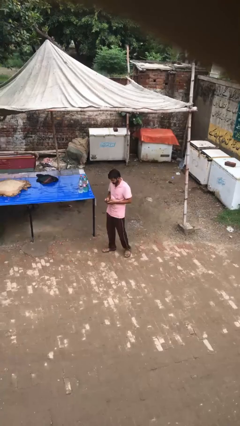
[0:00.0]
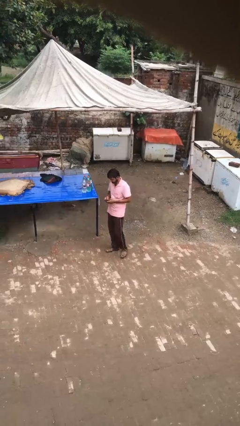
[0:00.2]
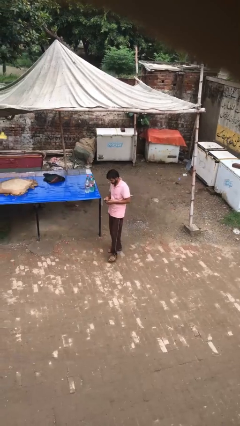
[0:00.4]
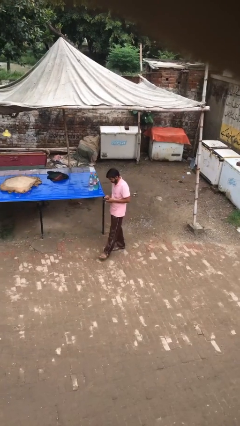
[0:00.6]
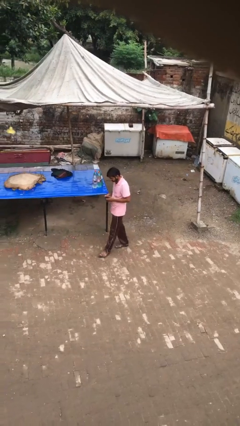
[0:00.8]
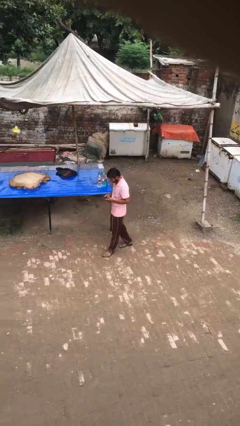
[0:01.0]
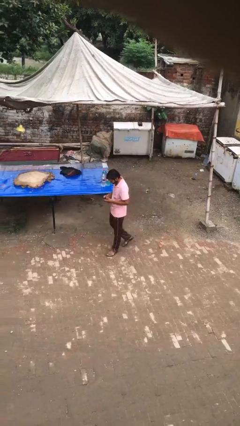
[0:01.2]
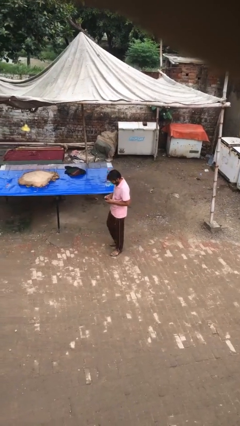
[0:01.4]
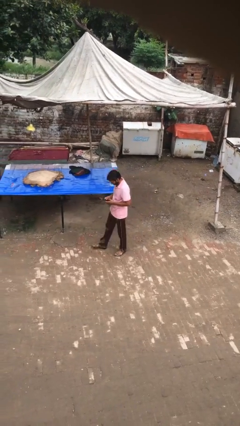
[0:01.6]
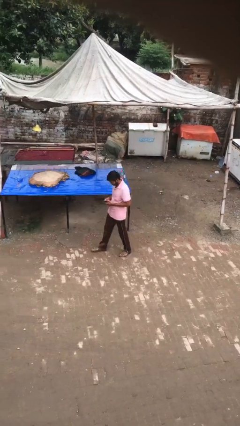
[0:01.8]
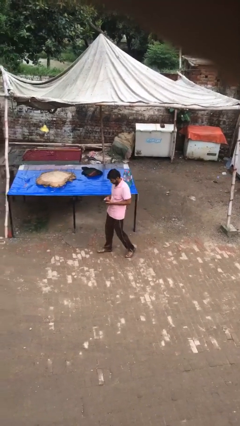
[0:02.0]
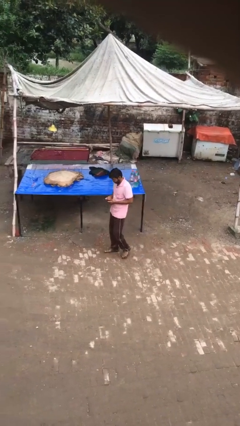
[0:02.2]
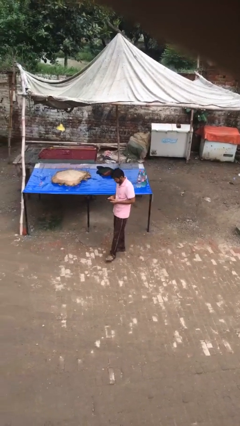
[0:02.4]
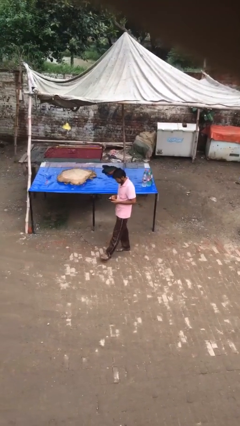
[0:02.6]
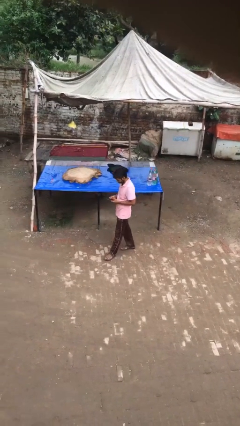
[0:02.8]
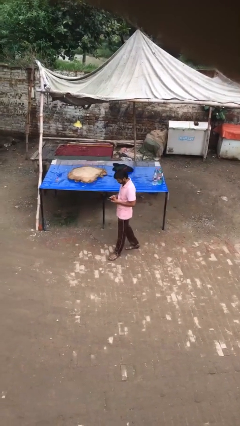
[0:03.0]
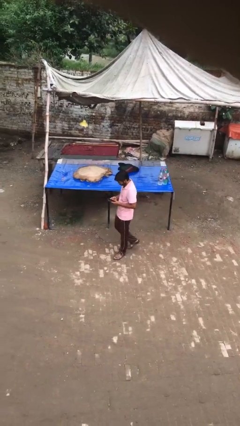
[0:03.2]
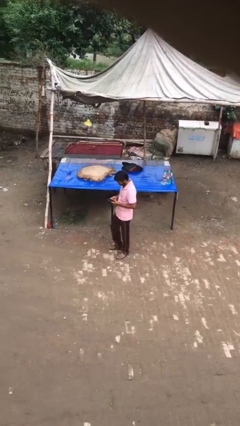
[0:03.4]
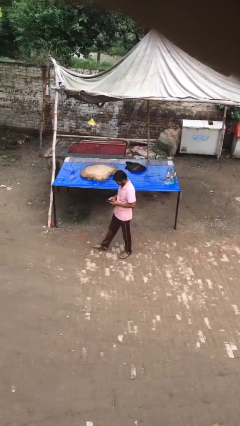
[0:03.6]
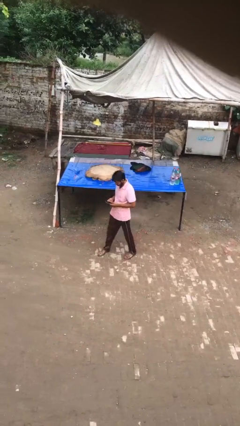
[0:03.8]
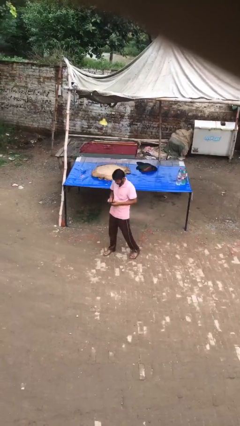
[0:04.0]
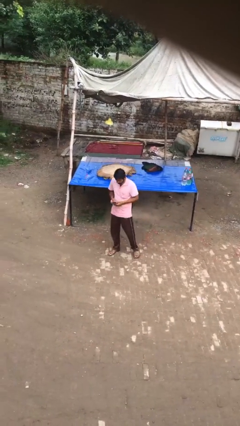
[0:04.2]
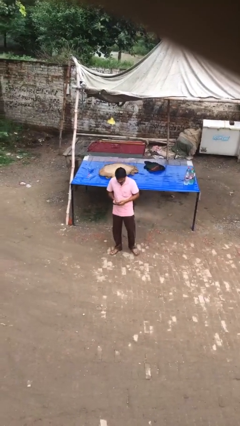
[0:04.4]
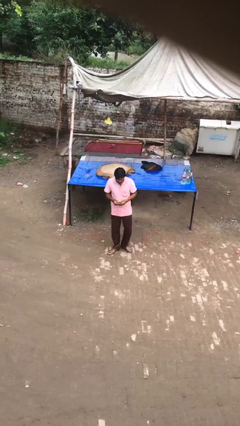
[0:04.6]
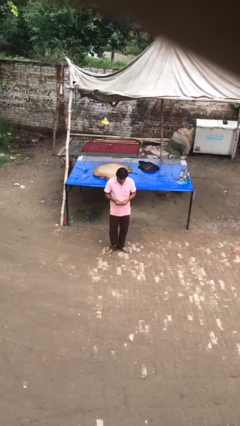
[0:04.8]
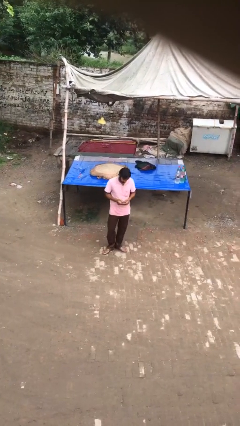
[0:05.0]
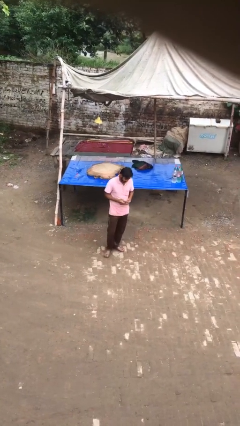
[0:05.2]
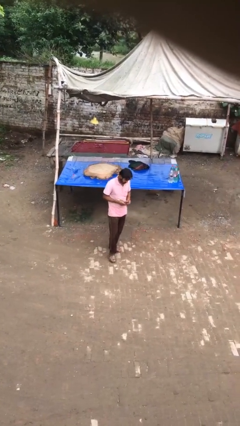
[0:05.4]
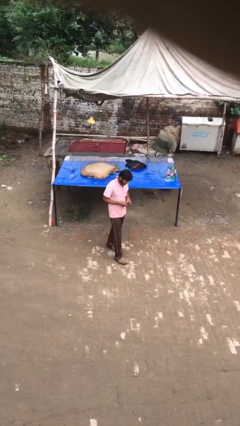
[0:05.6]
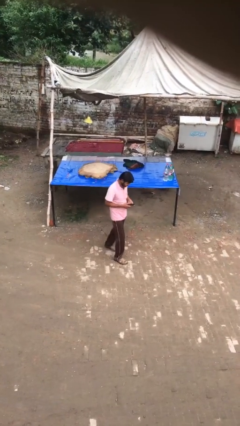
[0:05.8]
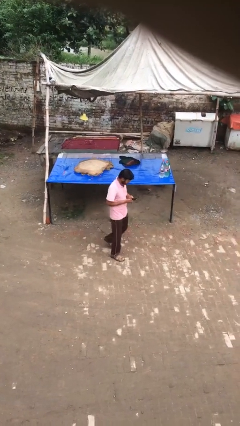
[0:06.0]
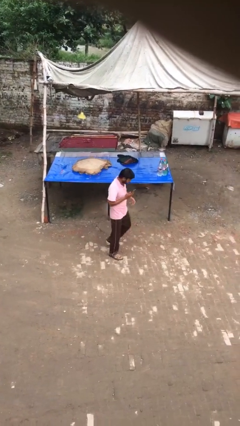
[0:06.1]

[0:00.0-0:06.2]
person texts on phone

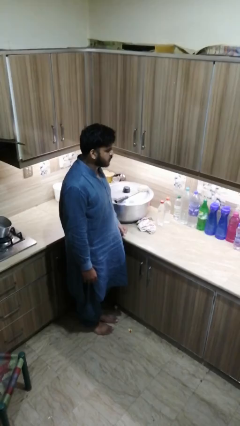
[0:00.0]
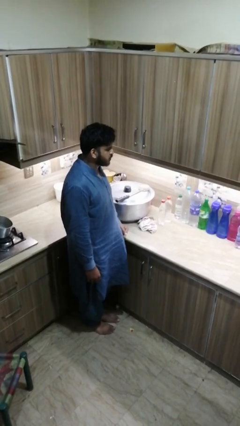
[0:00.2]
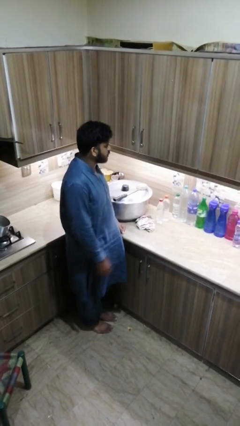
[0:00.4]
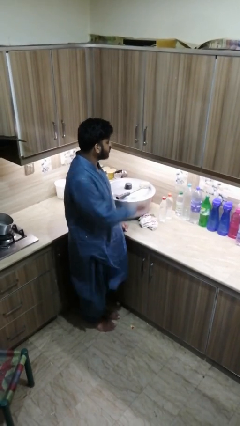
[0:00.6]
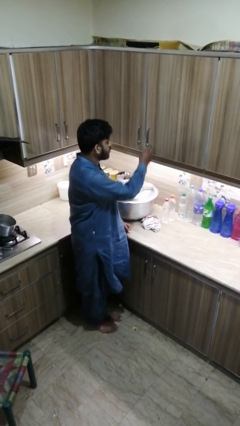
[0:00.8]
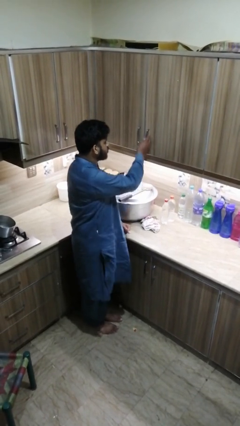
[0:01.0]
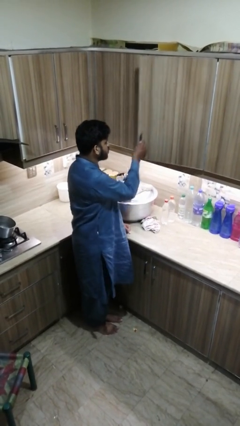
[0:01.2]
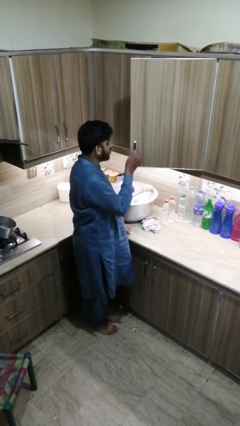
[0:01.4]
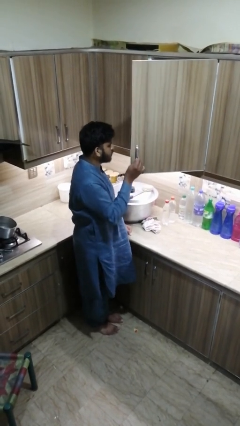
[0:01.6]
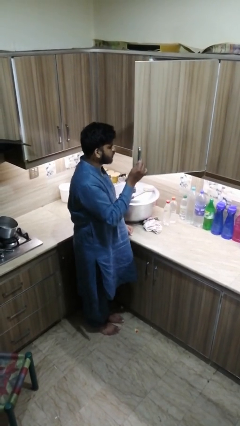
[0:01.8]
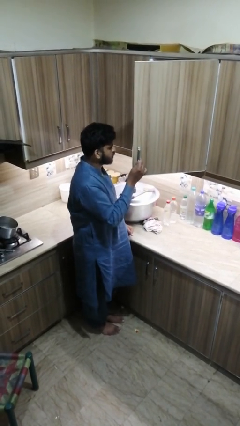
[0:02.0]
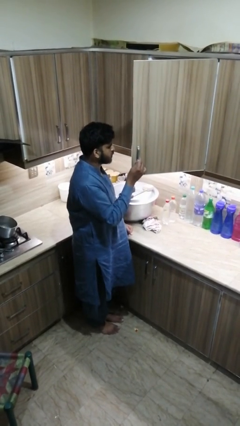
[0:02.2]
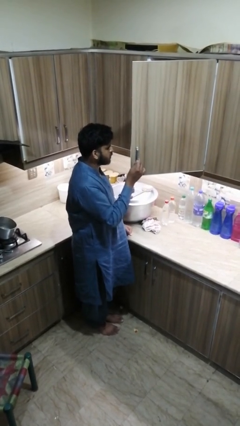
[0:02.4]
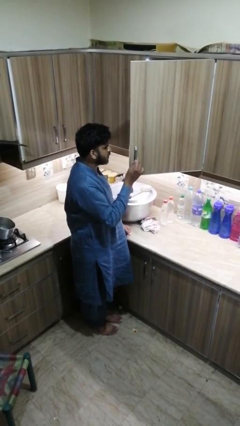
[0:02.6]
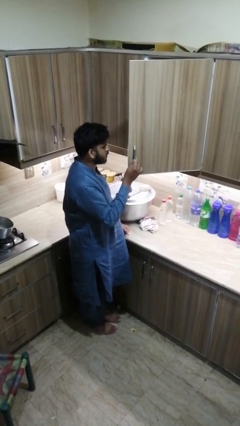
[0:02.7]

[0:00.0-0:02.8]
person opens kitchen drawer

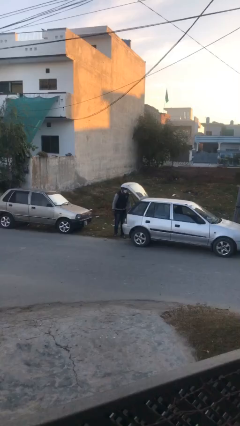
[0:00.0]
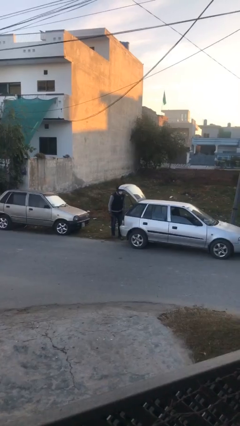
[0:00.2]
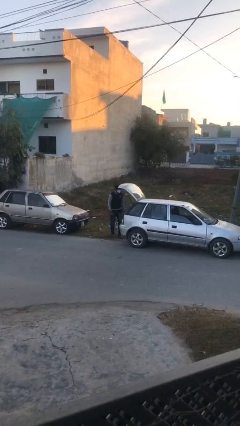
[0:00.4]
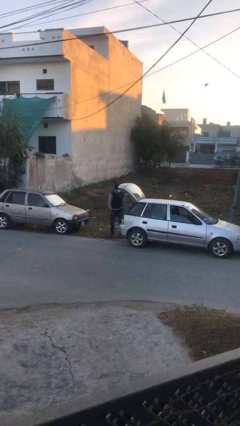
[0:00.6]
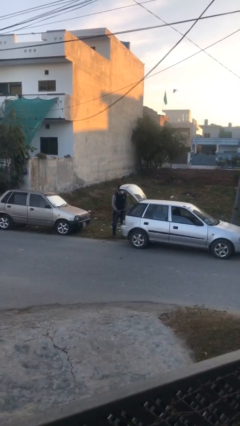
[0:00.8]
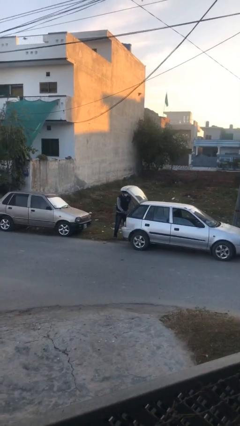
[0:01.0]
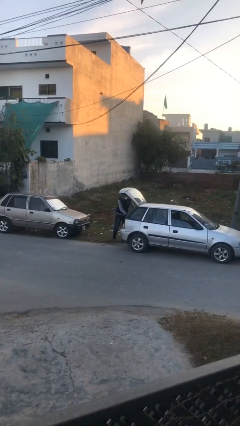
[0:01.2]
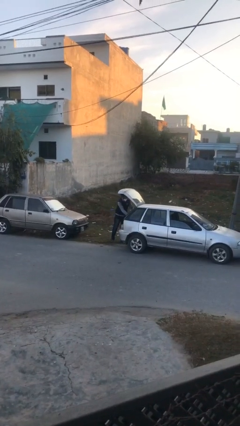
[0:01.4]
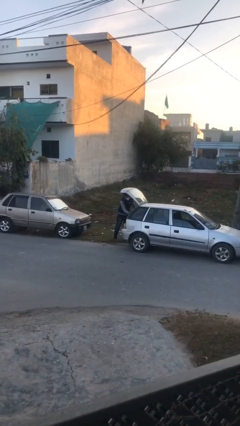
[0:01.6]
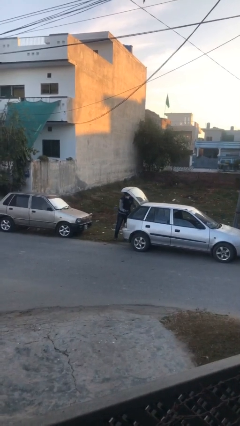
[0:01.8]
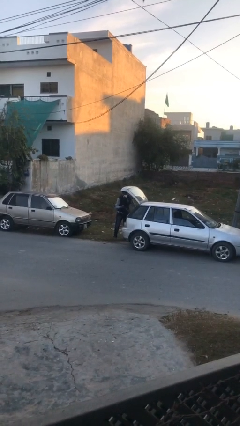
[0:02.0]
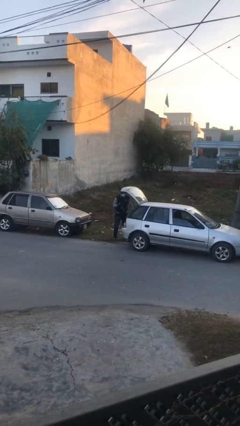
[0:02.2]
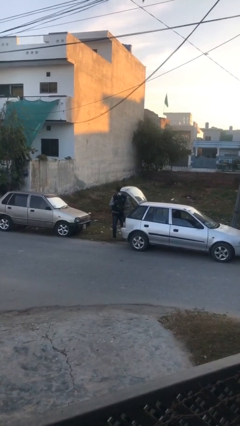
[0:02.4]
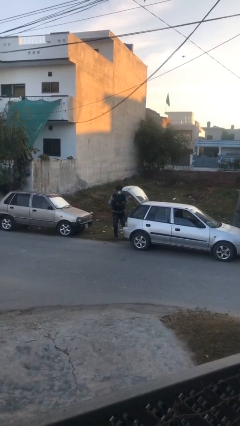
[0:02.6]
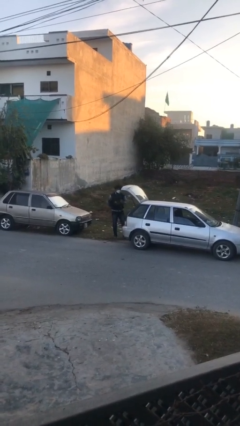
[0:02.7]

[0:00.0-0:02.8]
person unloads car

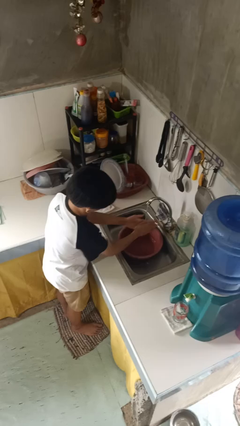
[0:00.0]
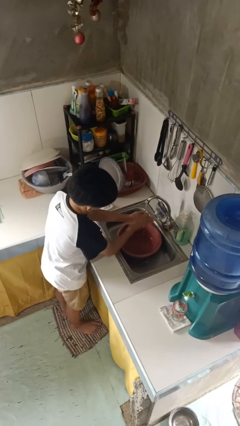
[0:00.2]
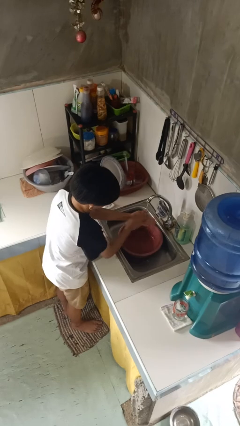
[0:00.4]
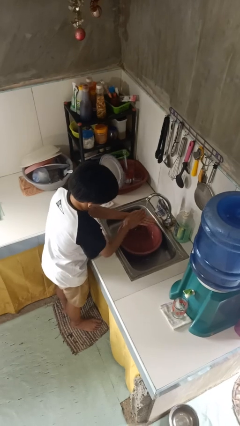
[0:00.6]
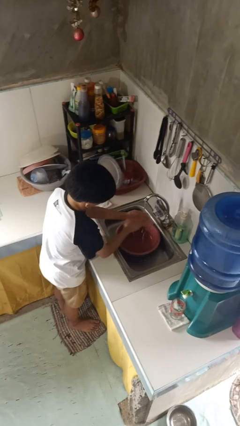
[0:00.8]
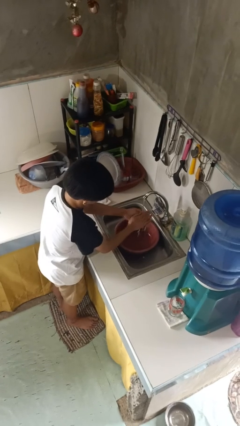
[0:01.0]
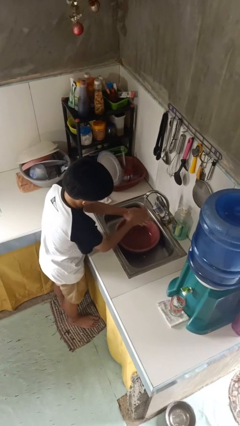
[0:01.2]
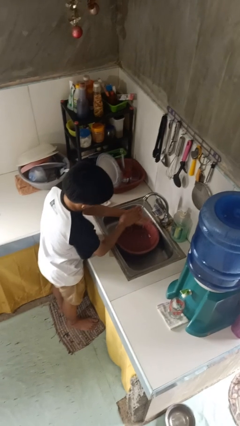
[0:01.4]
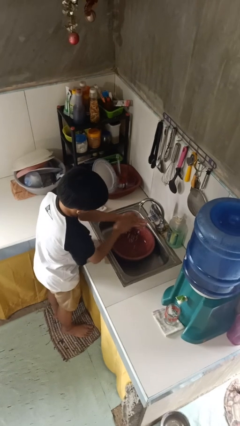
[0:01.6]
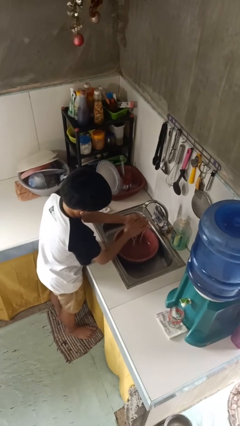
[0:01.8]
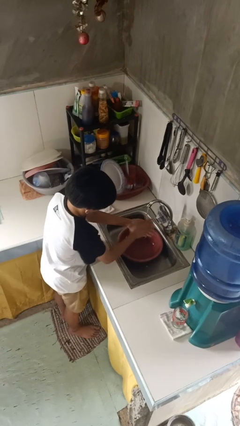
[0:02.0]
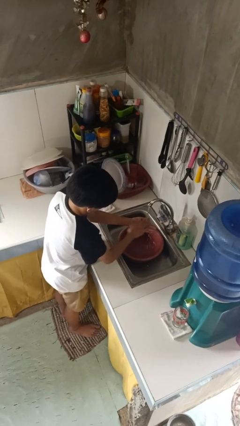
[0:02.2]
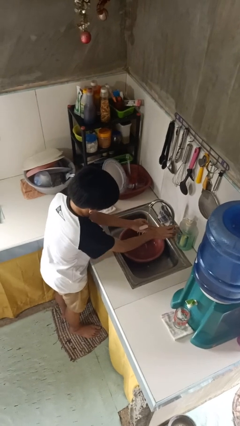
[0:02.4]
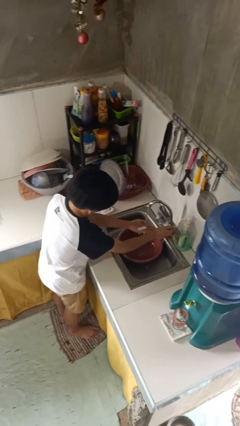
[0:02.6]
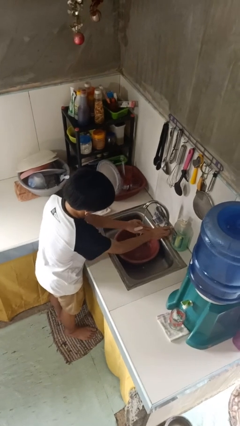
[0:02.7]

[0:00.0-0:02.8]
person washes hands

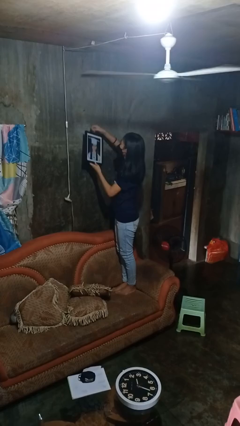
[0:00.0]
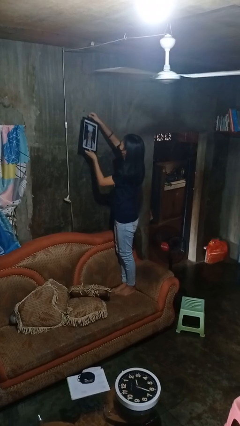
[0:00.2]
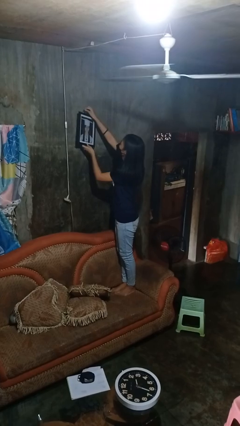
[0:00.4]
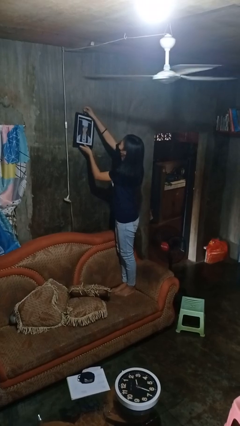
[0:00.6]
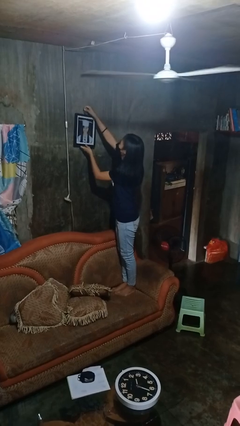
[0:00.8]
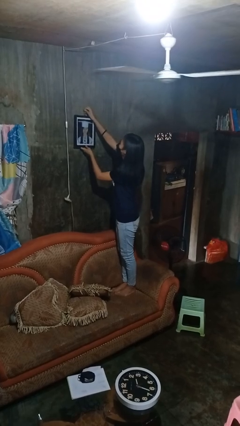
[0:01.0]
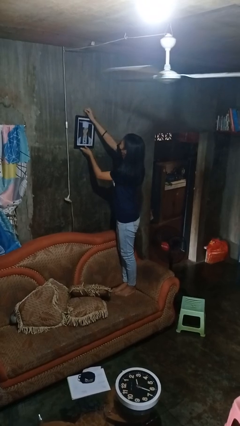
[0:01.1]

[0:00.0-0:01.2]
person puts up picture frame

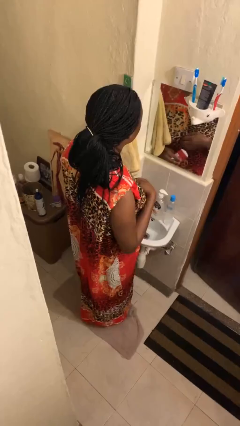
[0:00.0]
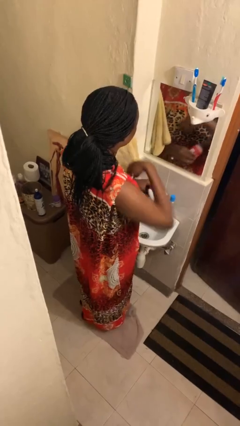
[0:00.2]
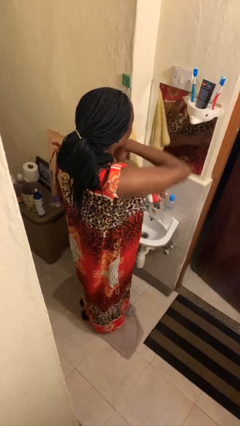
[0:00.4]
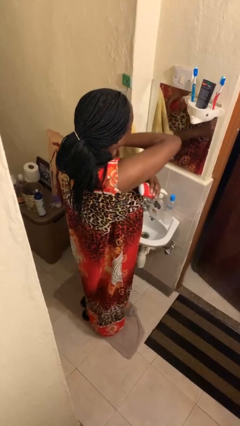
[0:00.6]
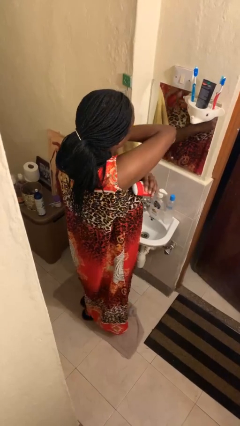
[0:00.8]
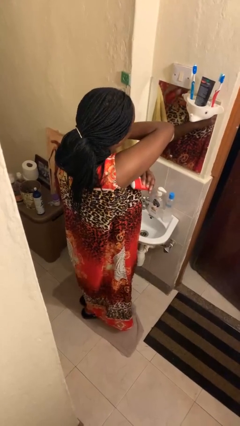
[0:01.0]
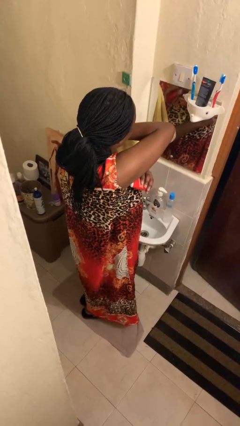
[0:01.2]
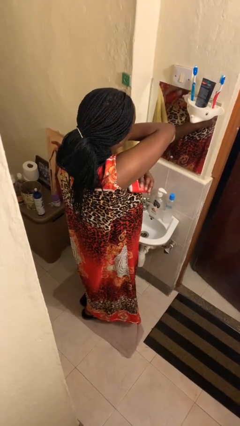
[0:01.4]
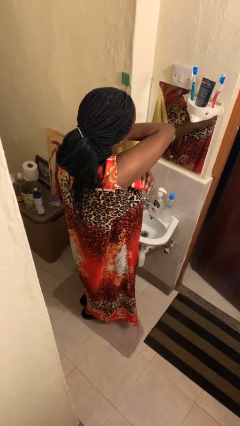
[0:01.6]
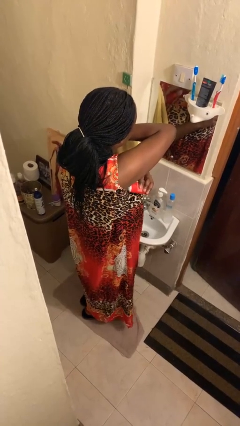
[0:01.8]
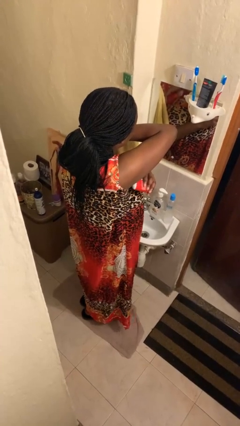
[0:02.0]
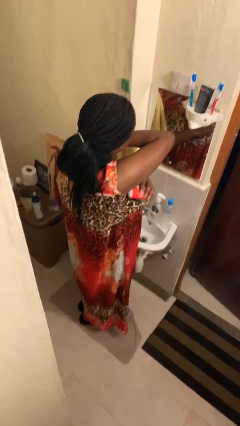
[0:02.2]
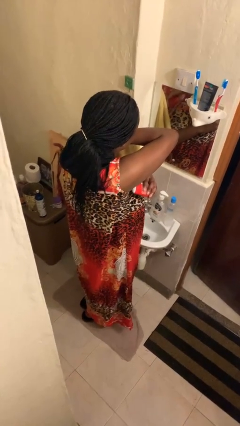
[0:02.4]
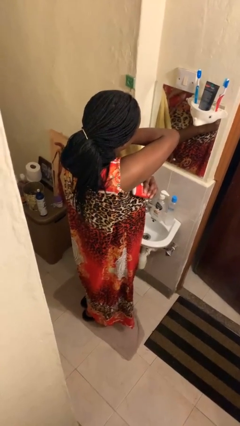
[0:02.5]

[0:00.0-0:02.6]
person applies deodorant
